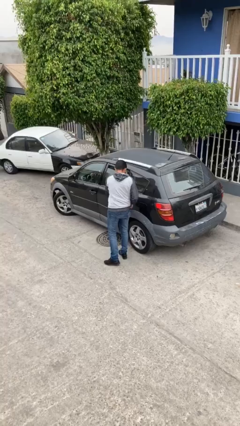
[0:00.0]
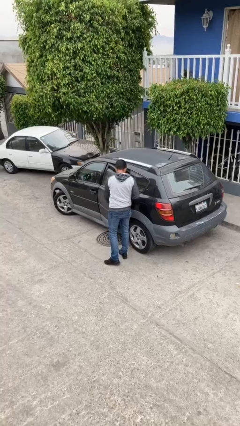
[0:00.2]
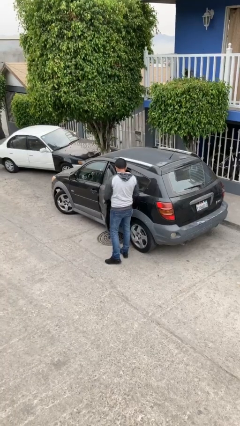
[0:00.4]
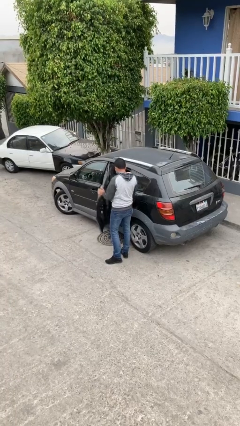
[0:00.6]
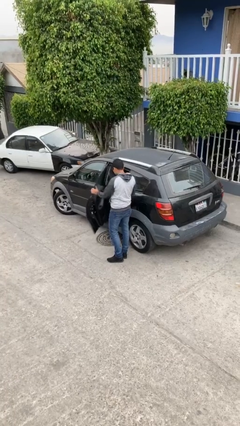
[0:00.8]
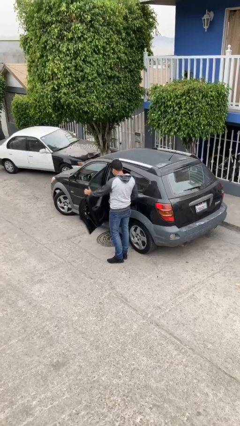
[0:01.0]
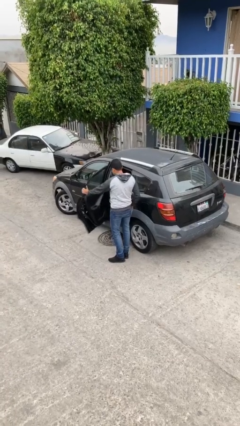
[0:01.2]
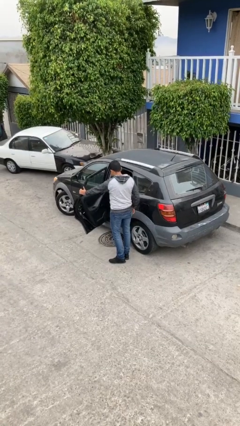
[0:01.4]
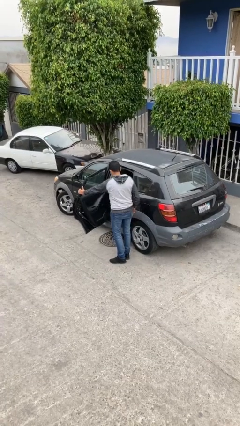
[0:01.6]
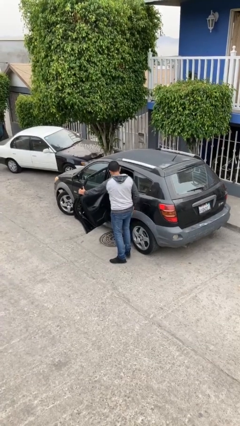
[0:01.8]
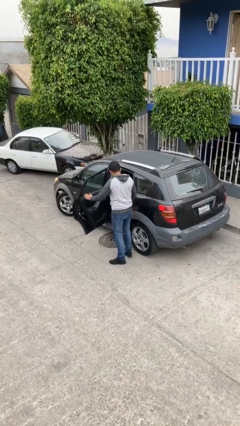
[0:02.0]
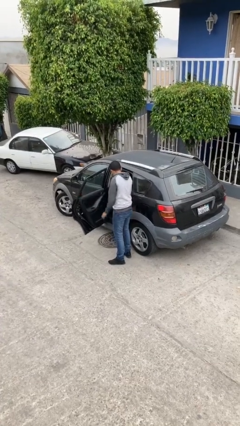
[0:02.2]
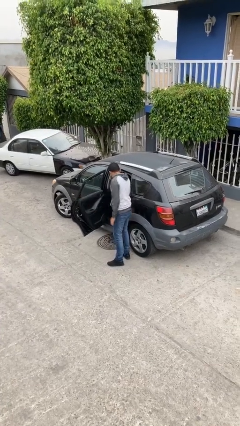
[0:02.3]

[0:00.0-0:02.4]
person opens car door

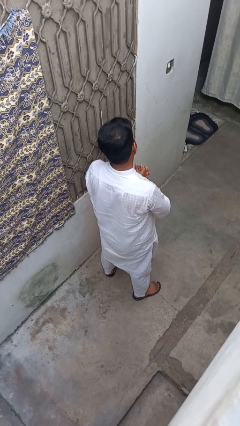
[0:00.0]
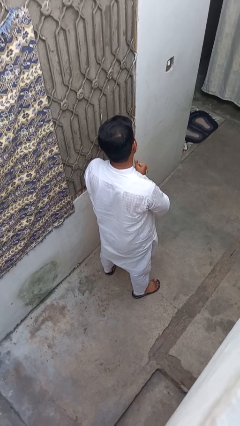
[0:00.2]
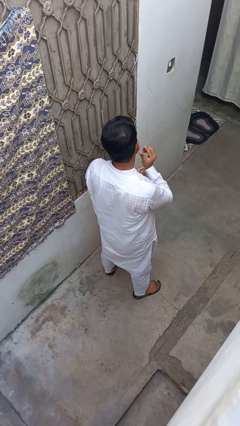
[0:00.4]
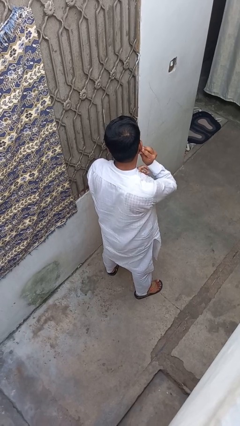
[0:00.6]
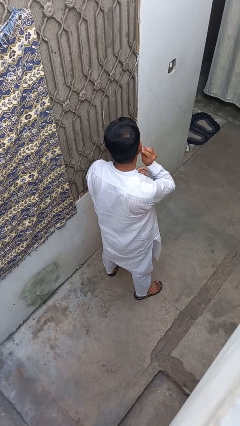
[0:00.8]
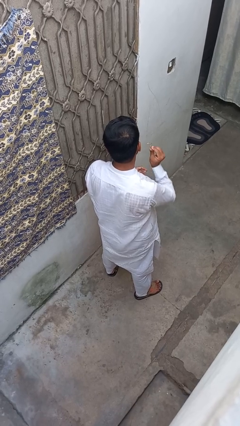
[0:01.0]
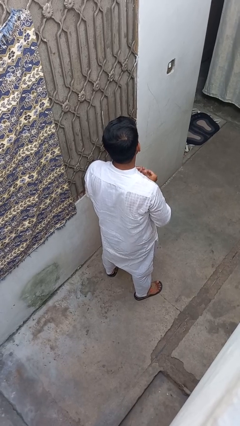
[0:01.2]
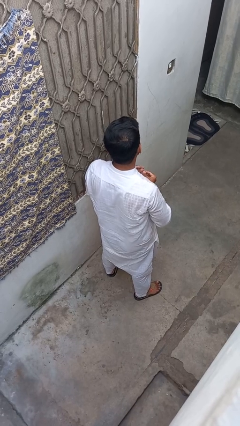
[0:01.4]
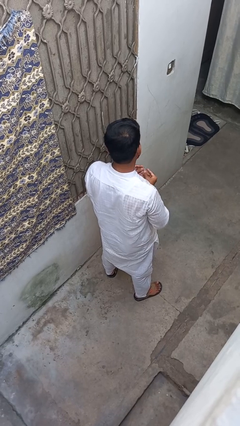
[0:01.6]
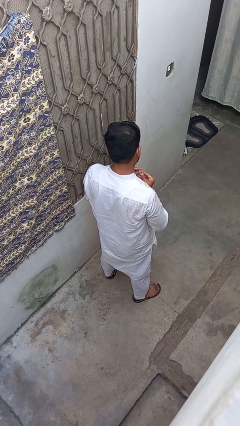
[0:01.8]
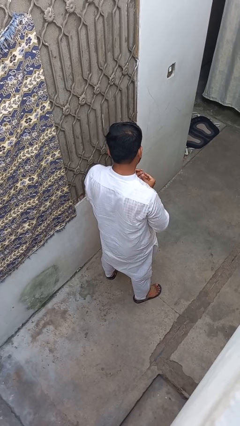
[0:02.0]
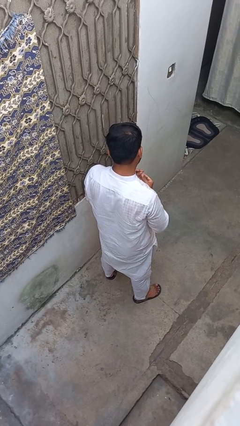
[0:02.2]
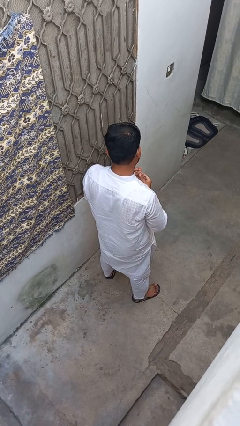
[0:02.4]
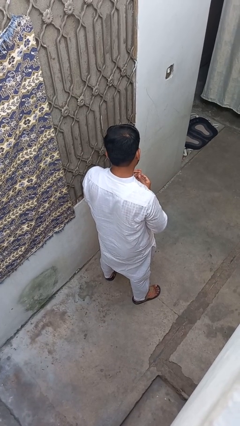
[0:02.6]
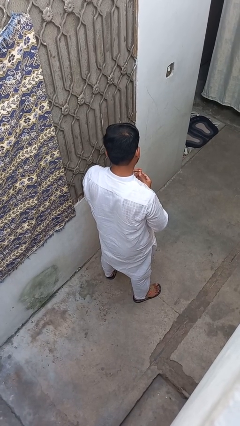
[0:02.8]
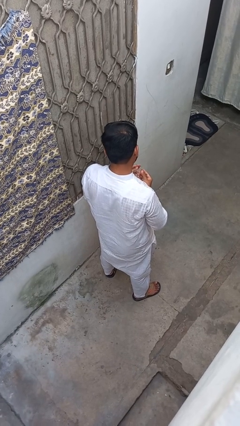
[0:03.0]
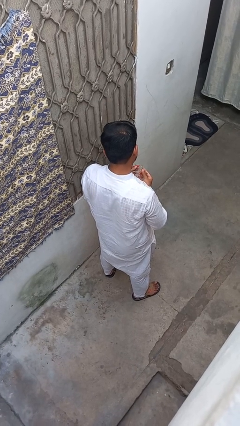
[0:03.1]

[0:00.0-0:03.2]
person takes off earrings

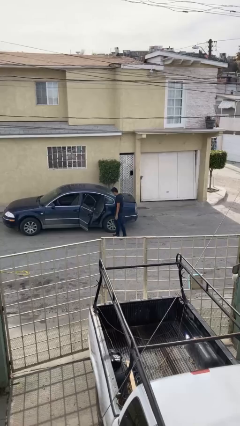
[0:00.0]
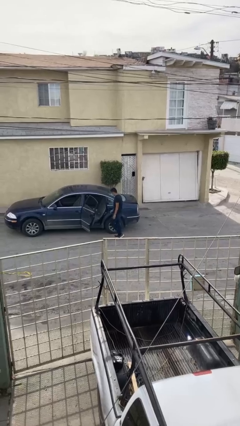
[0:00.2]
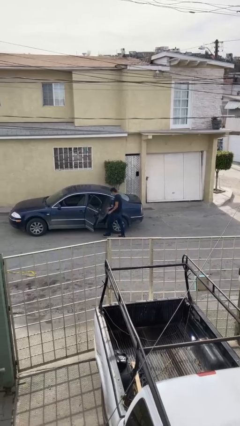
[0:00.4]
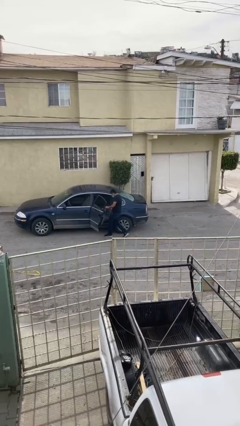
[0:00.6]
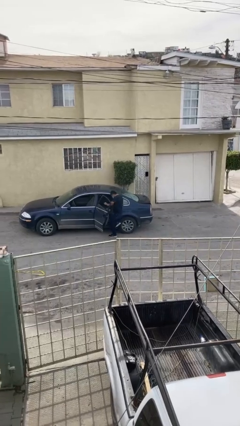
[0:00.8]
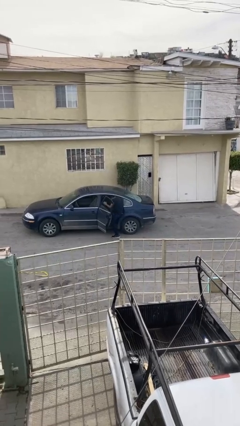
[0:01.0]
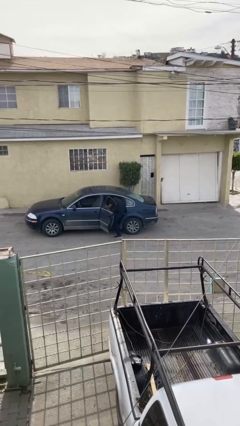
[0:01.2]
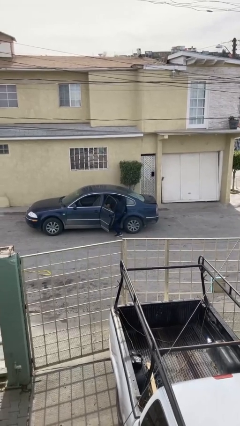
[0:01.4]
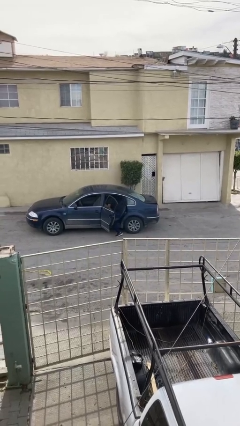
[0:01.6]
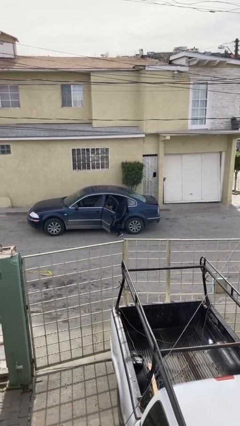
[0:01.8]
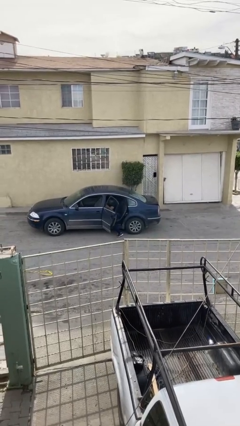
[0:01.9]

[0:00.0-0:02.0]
person enters car

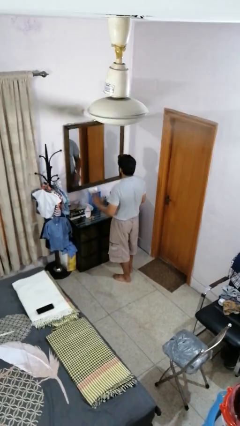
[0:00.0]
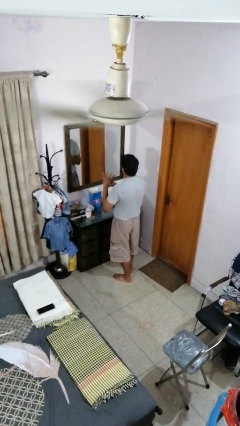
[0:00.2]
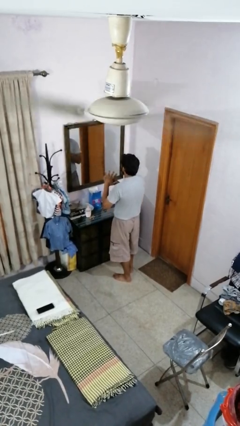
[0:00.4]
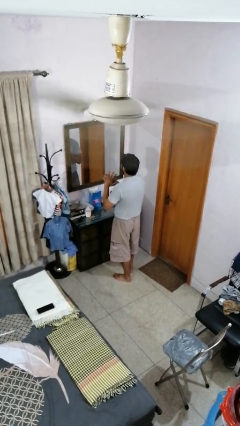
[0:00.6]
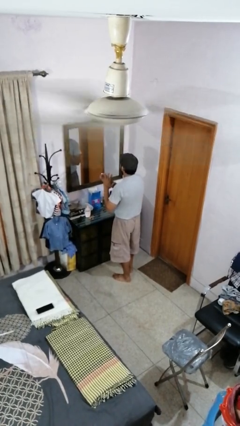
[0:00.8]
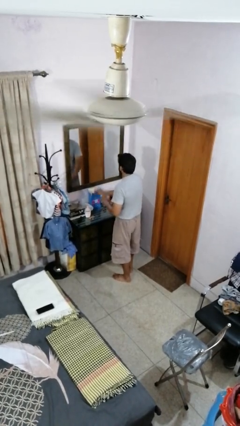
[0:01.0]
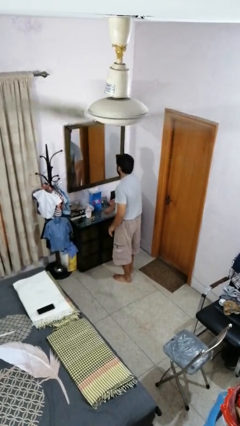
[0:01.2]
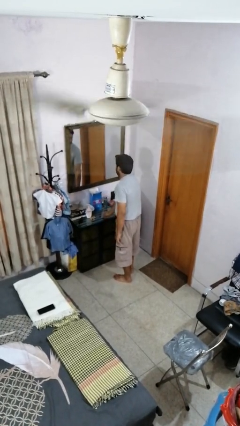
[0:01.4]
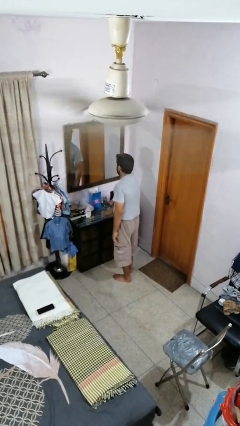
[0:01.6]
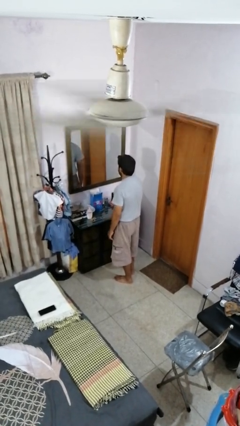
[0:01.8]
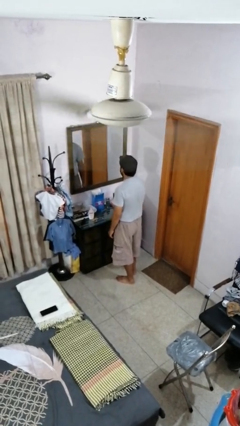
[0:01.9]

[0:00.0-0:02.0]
person takes off ring

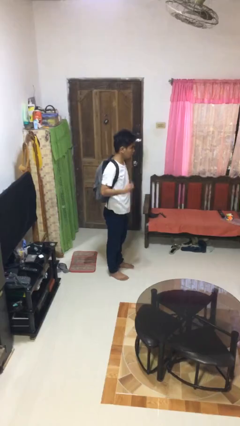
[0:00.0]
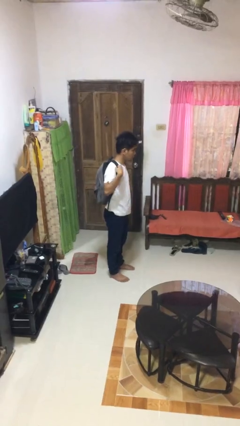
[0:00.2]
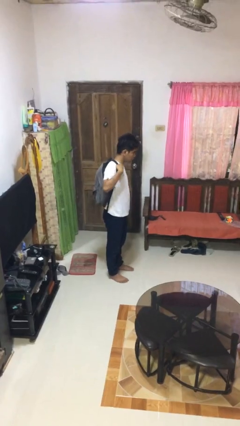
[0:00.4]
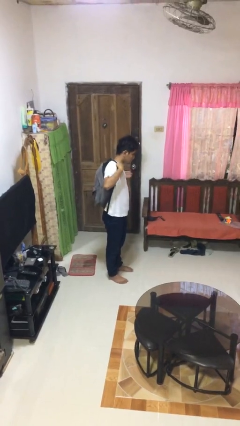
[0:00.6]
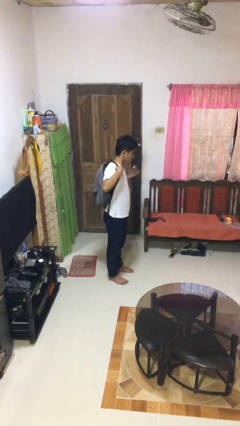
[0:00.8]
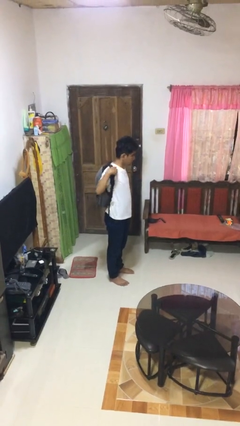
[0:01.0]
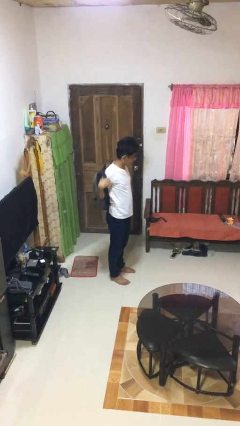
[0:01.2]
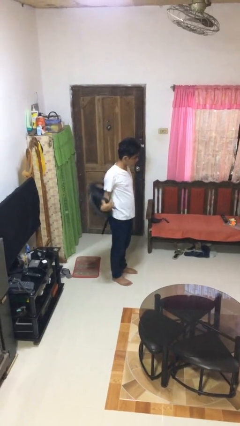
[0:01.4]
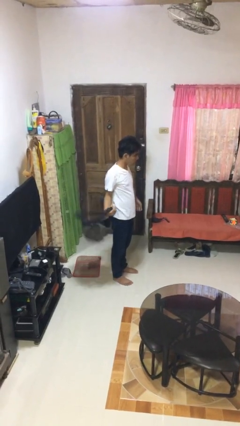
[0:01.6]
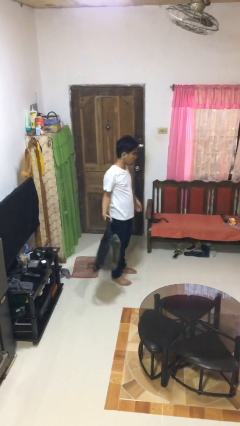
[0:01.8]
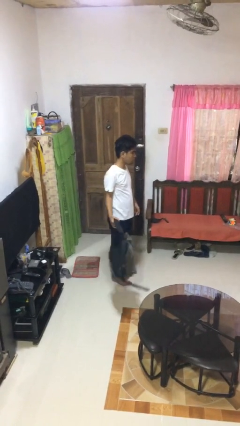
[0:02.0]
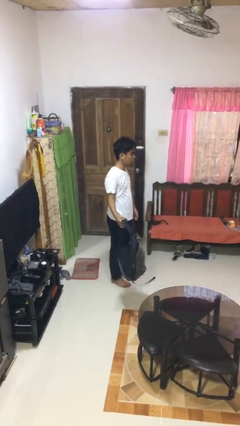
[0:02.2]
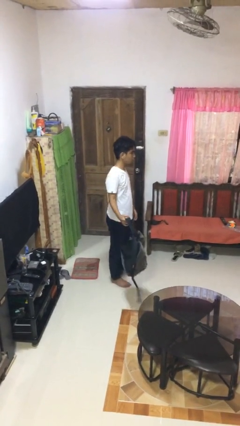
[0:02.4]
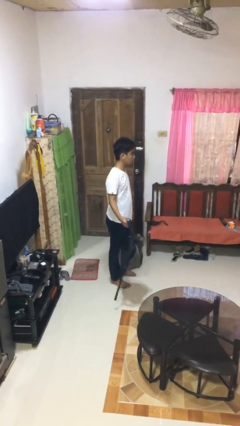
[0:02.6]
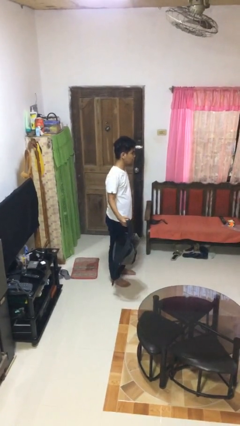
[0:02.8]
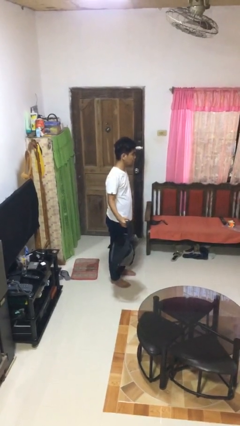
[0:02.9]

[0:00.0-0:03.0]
person takes off backpack

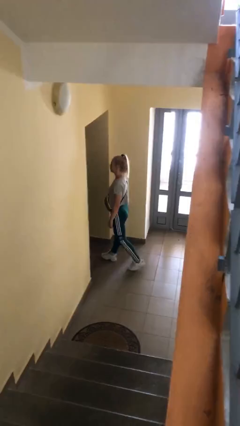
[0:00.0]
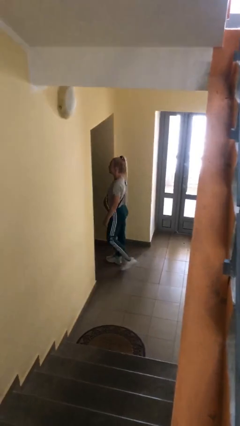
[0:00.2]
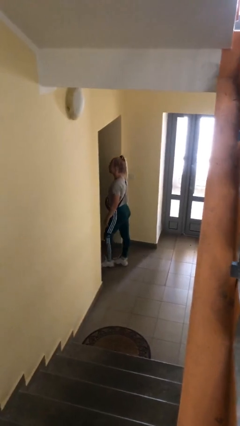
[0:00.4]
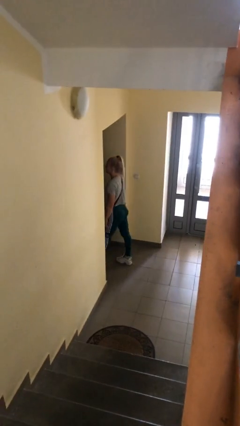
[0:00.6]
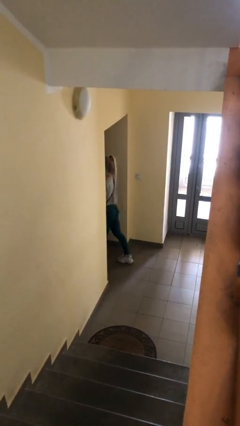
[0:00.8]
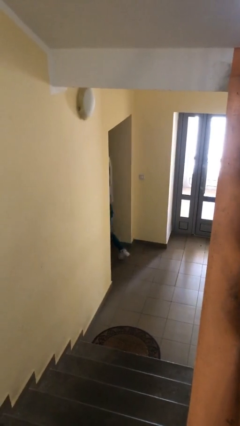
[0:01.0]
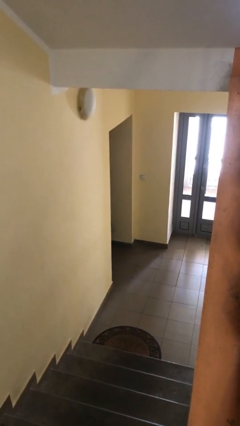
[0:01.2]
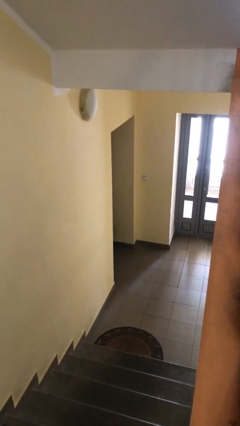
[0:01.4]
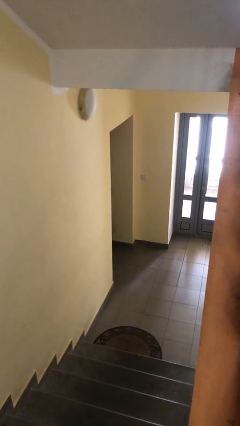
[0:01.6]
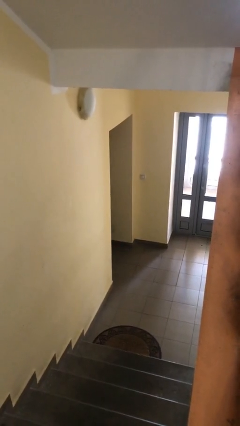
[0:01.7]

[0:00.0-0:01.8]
person exits scene through structure

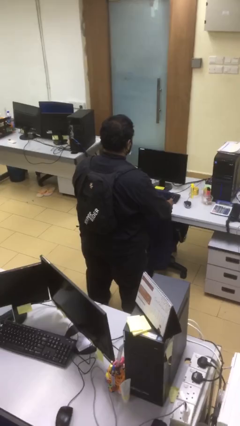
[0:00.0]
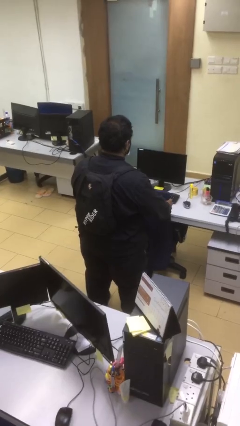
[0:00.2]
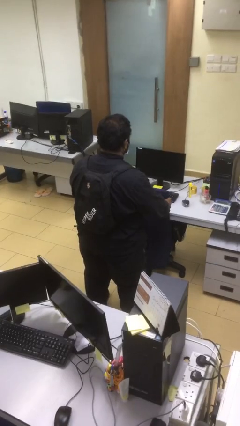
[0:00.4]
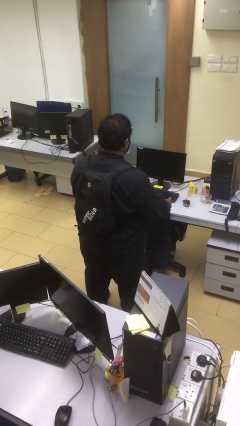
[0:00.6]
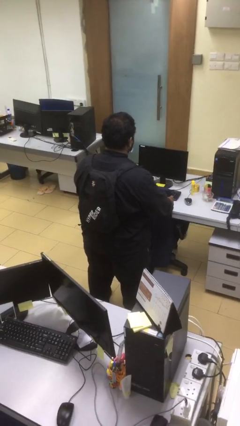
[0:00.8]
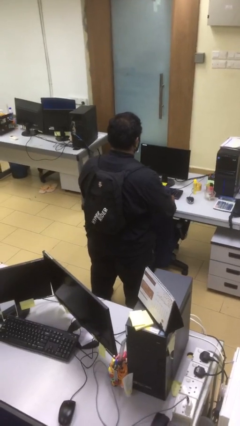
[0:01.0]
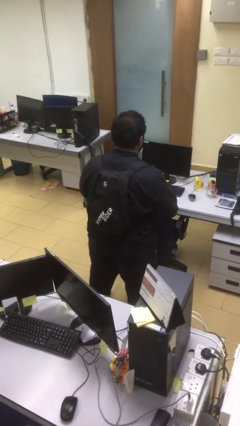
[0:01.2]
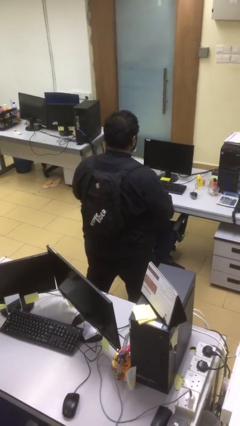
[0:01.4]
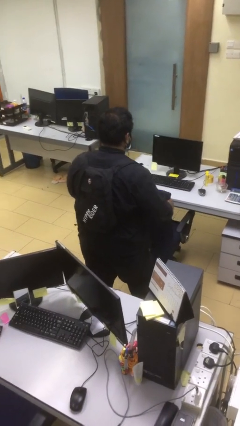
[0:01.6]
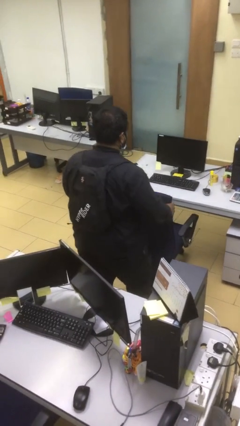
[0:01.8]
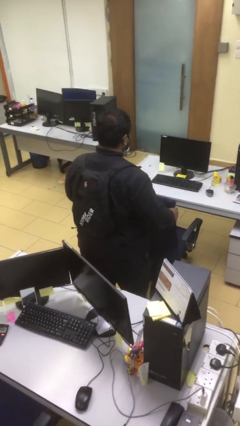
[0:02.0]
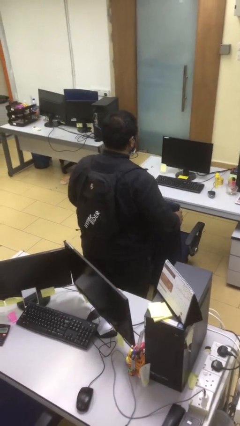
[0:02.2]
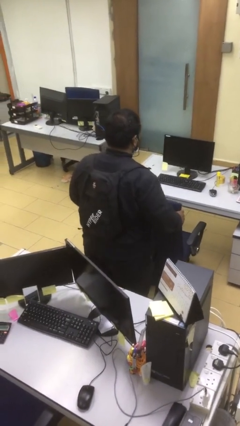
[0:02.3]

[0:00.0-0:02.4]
person pulls out chair
